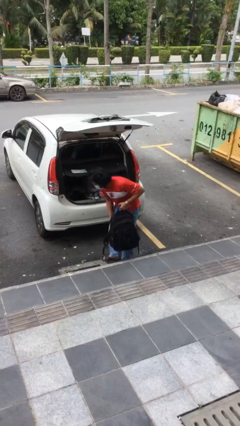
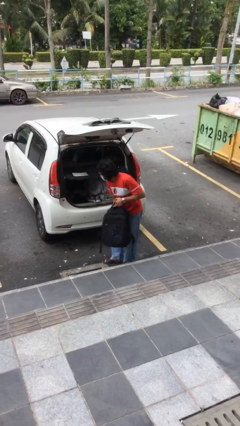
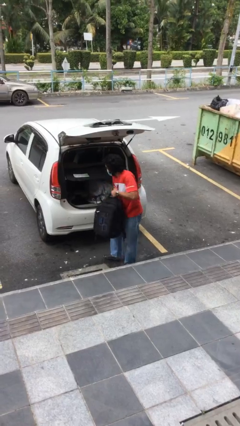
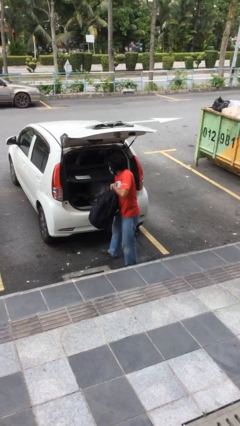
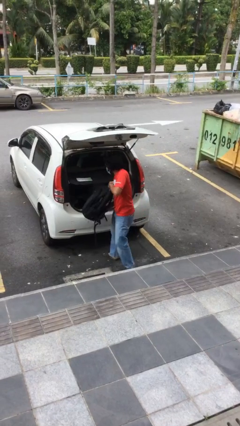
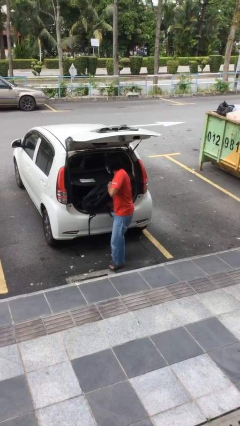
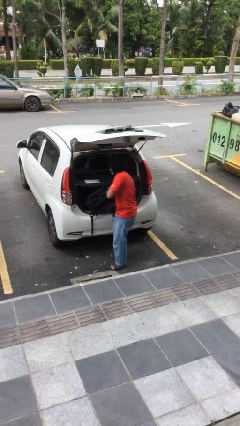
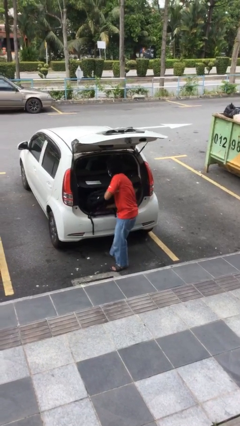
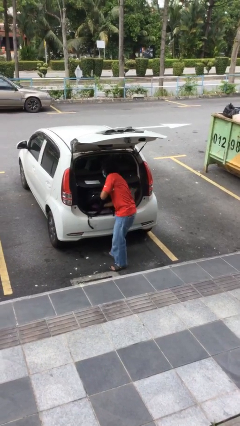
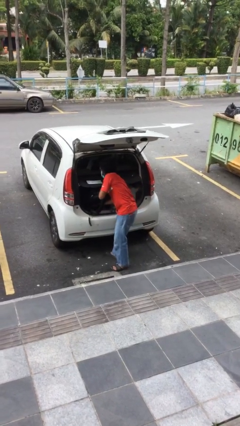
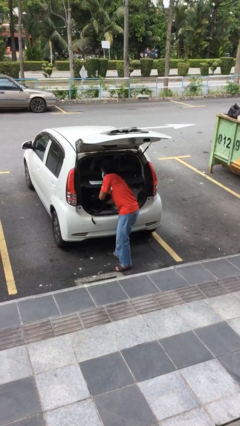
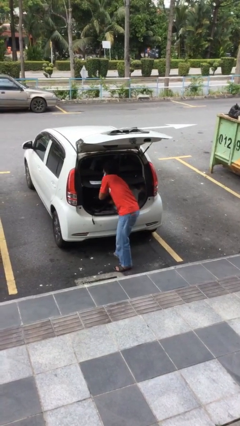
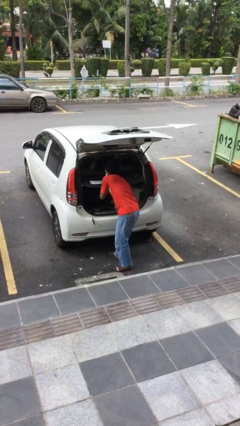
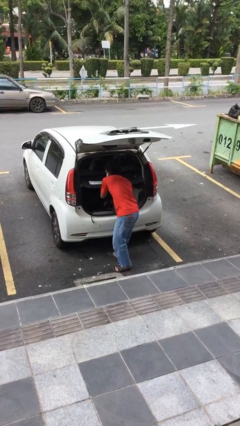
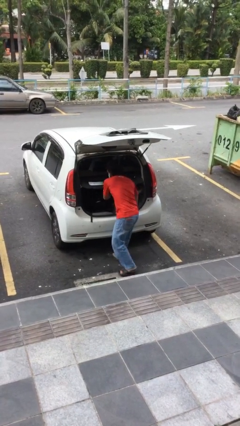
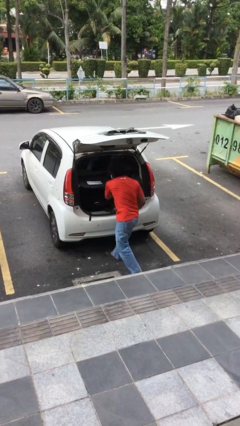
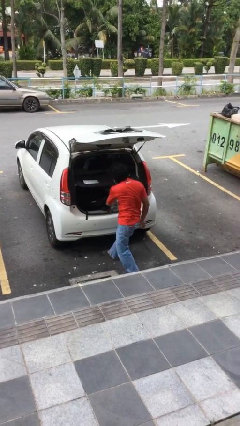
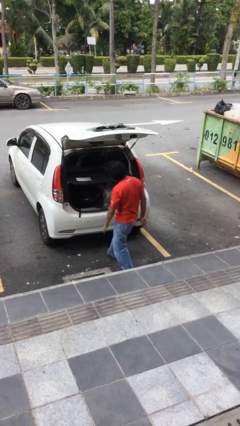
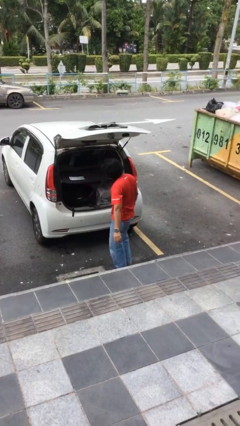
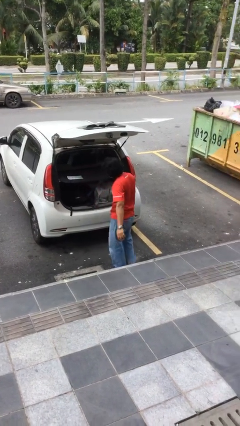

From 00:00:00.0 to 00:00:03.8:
person loads car

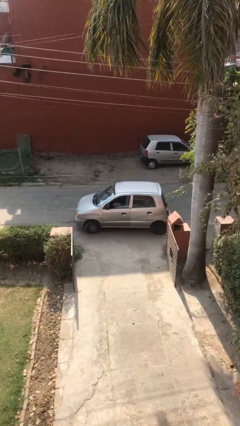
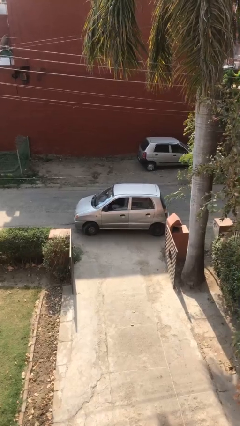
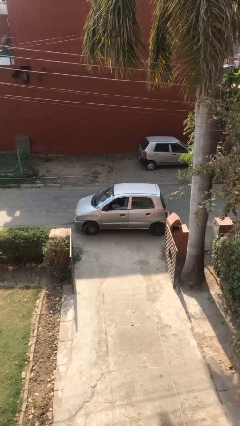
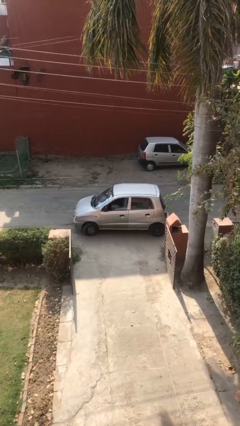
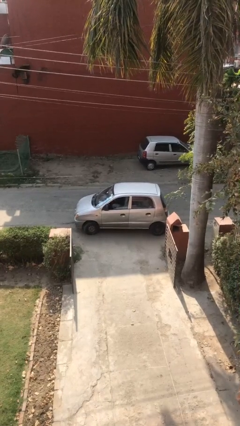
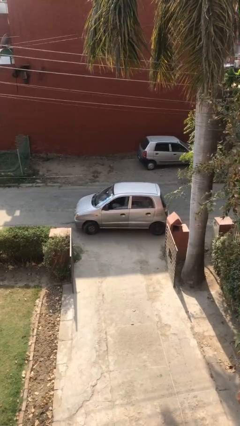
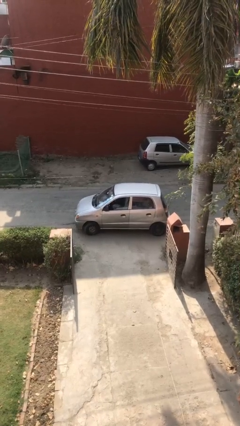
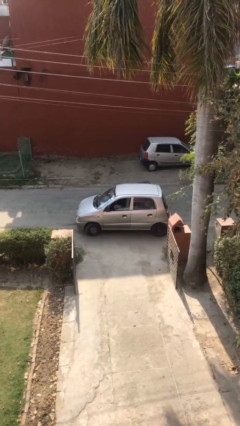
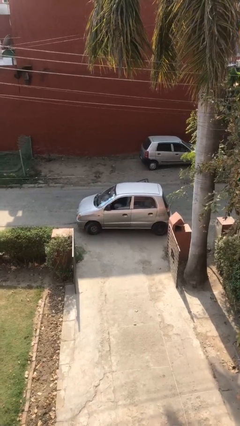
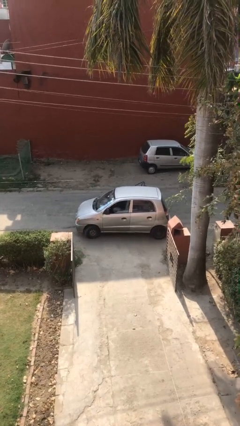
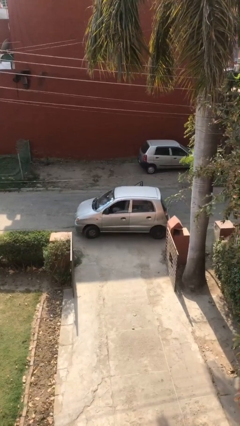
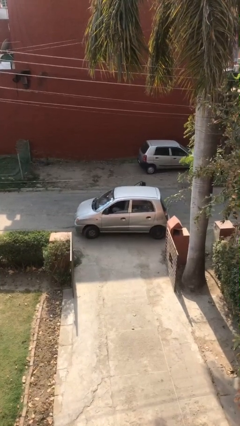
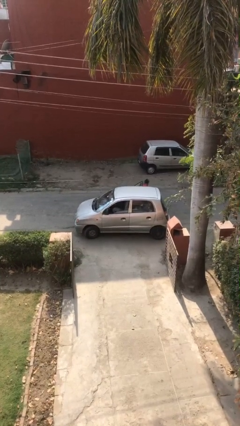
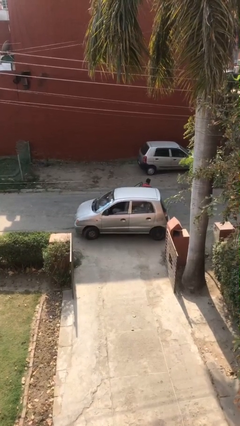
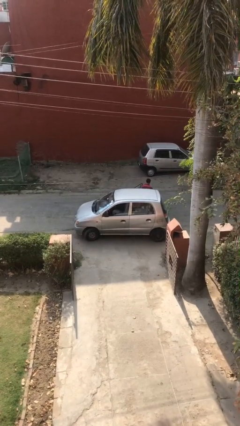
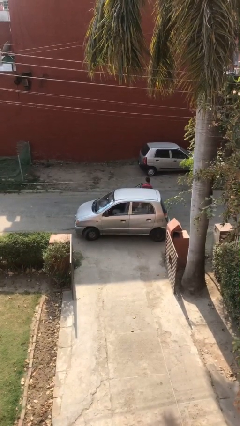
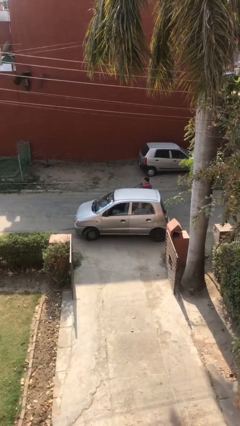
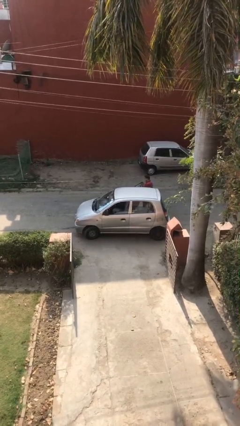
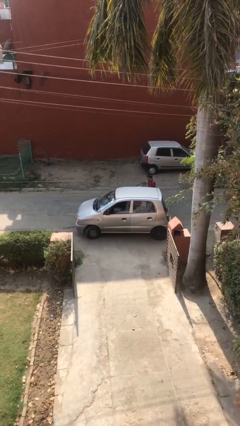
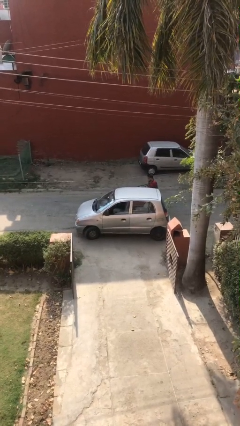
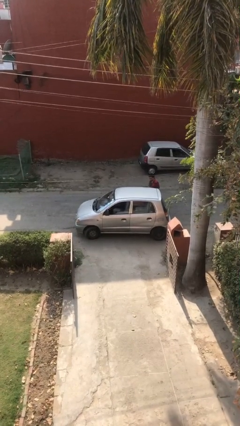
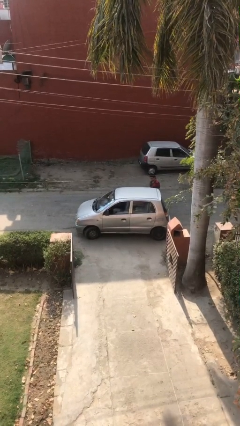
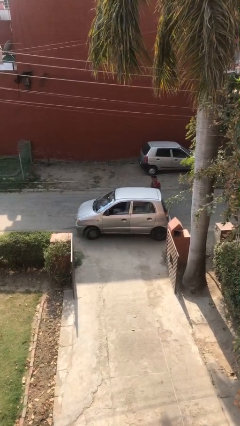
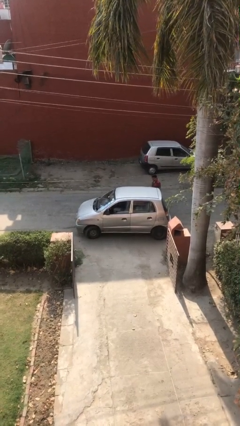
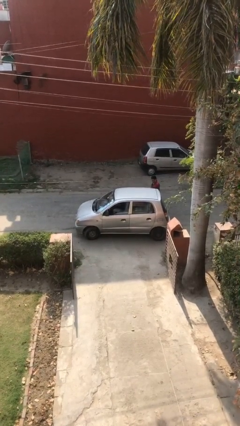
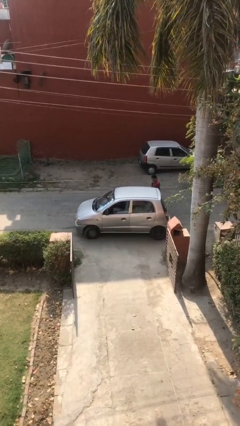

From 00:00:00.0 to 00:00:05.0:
car drops off person

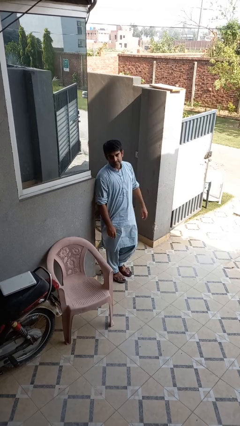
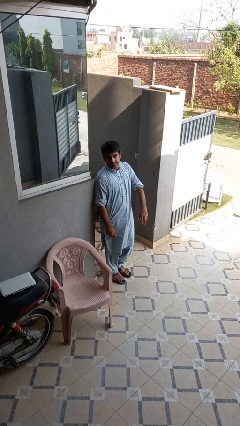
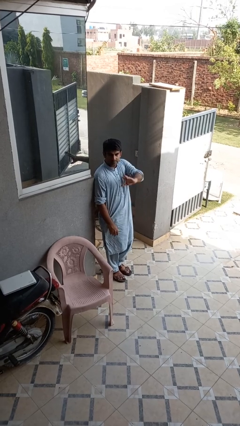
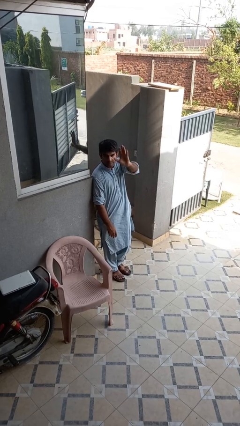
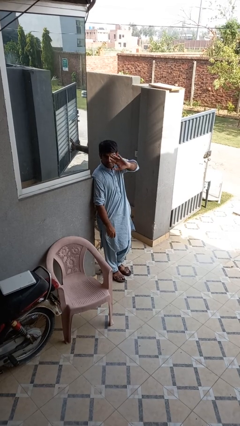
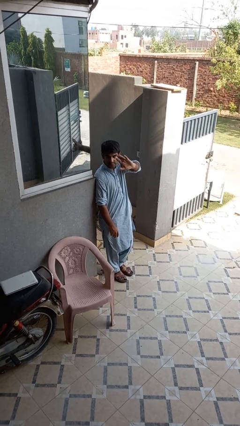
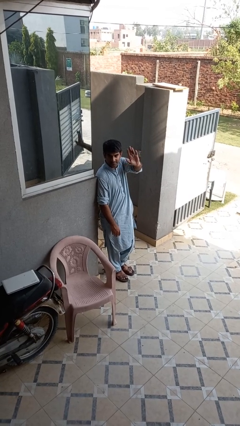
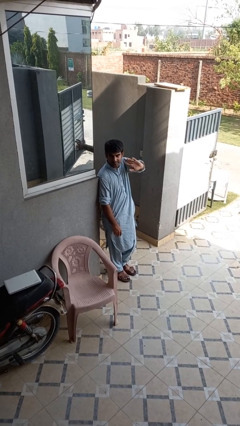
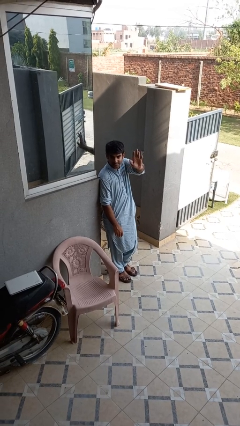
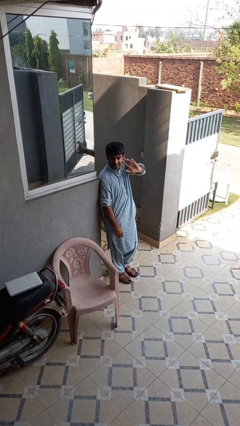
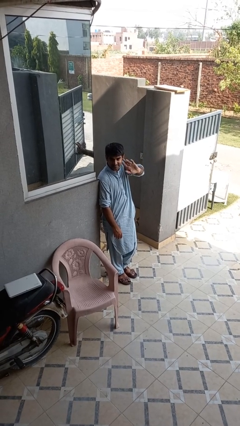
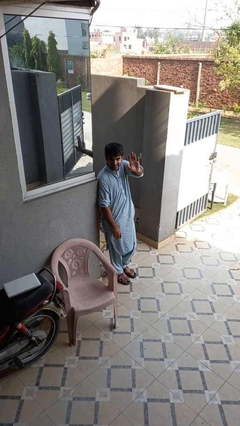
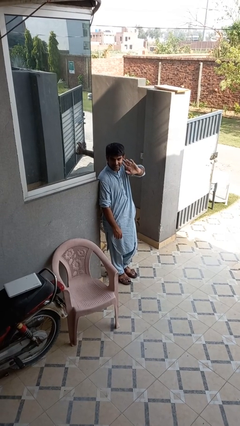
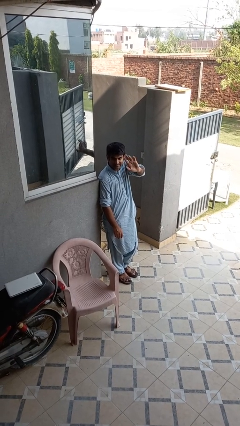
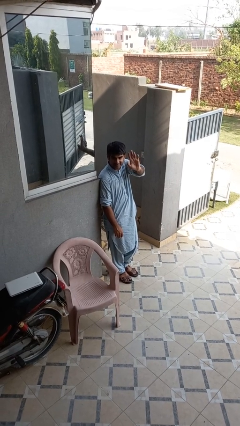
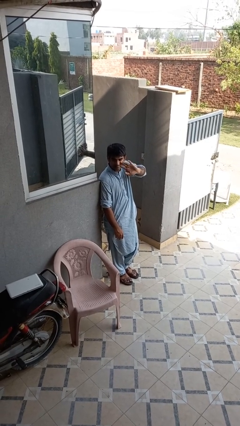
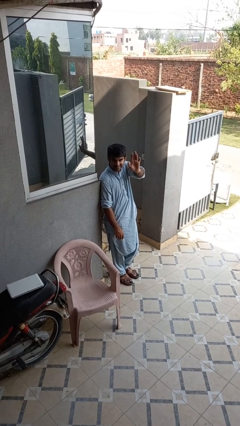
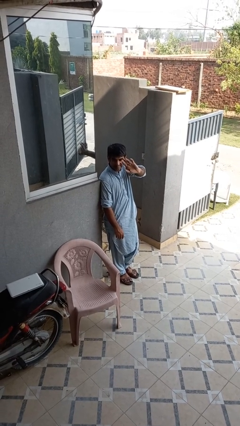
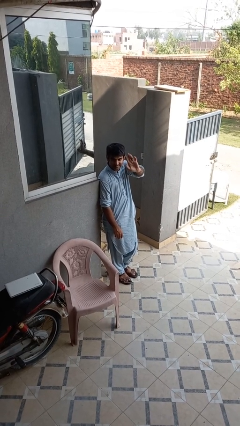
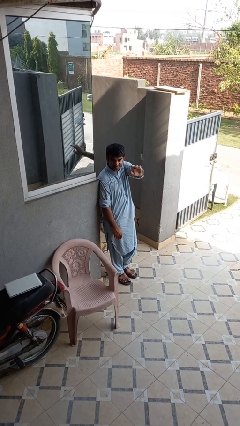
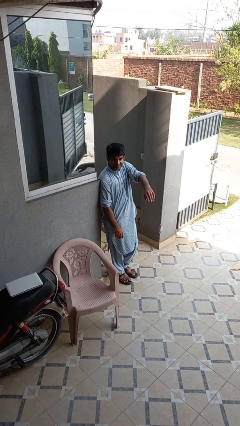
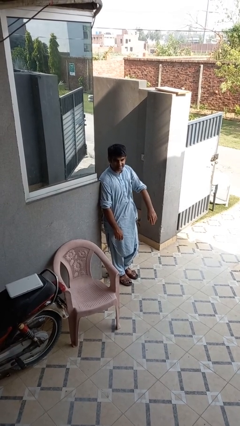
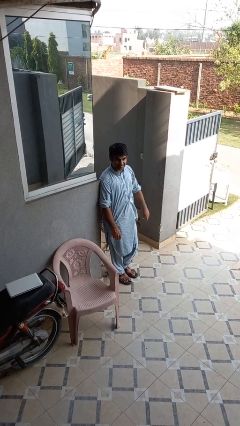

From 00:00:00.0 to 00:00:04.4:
person waves at person

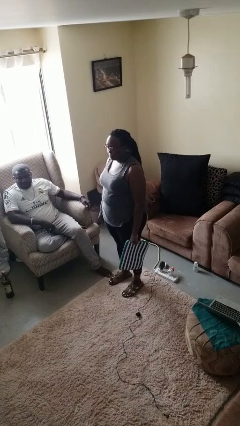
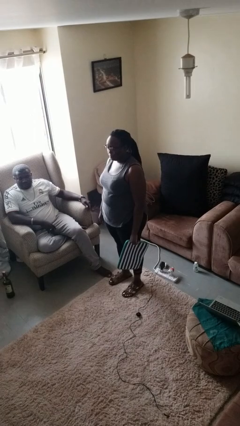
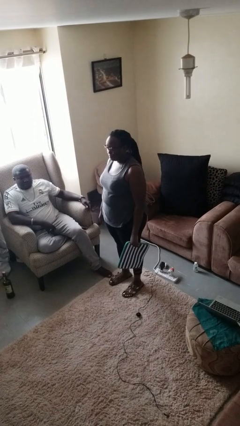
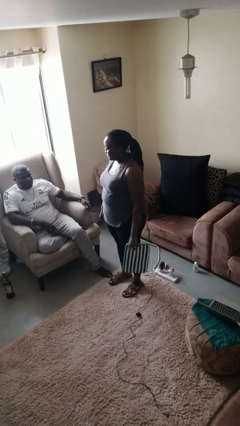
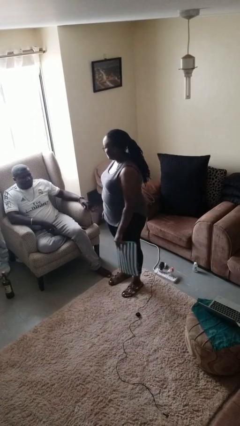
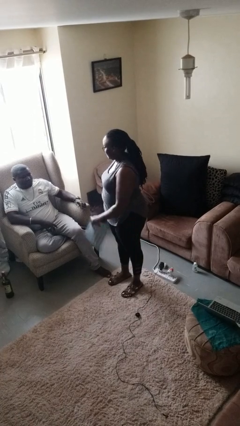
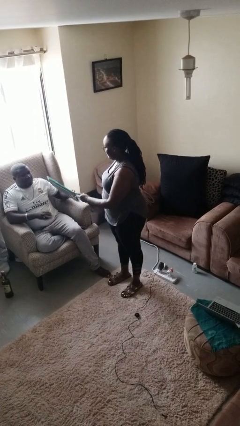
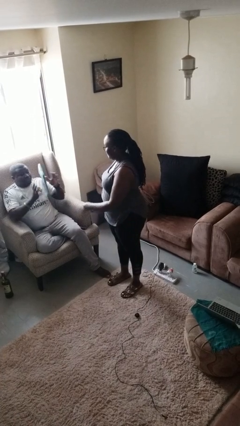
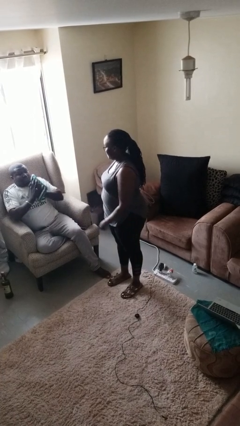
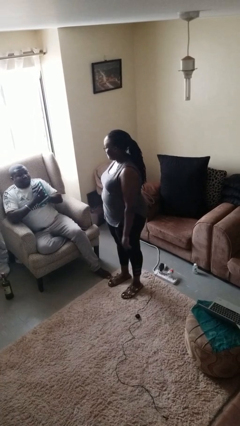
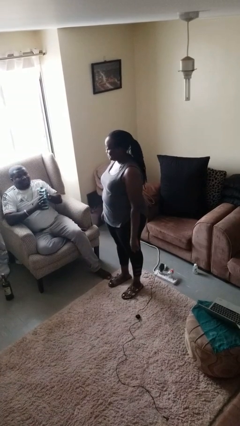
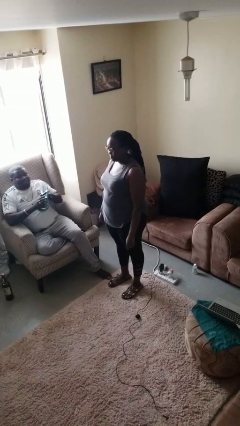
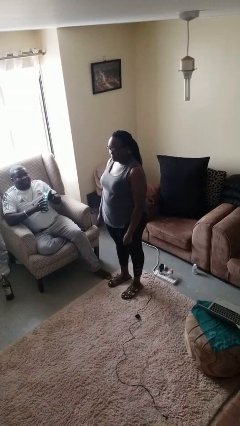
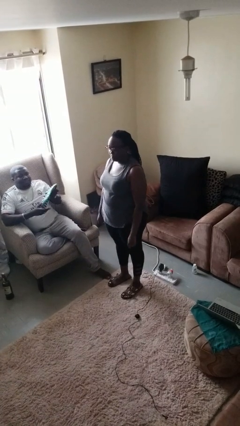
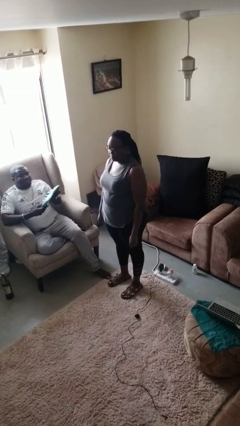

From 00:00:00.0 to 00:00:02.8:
person throws object to person

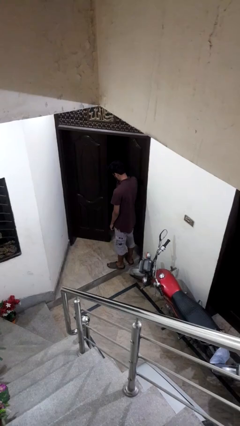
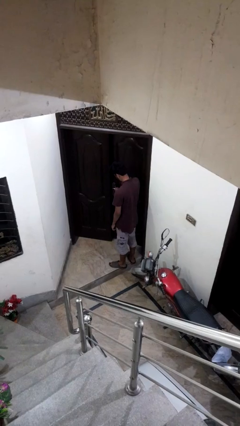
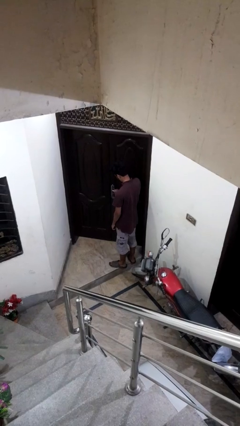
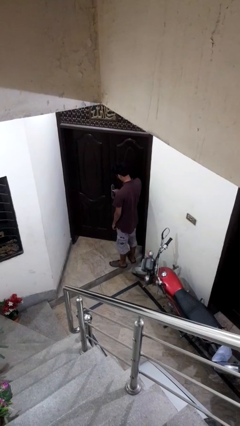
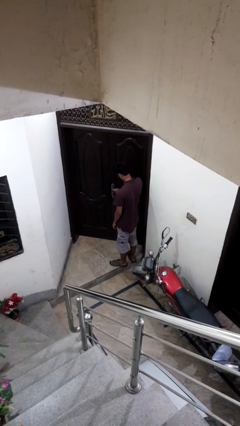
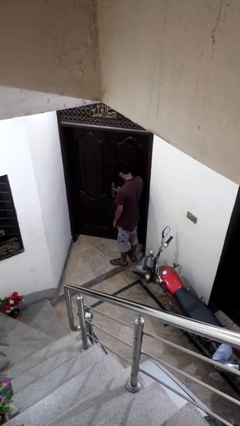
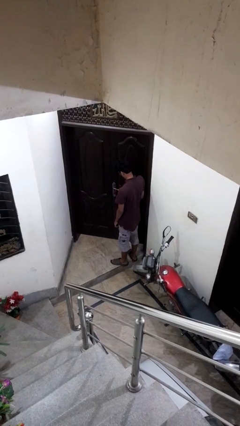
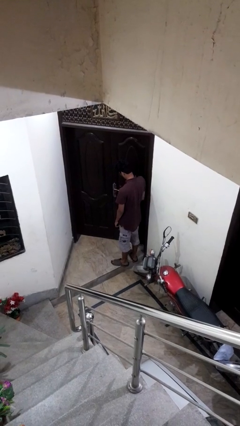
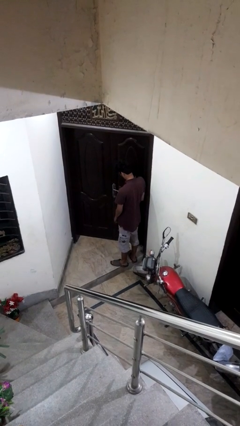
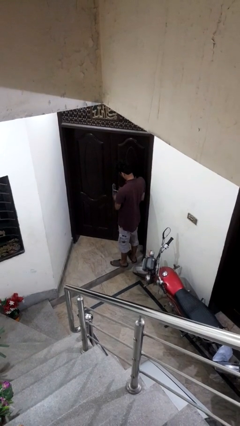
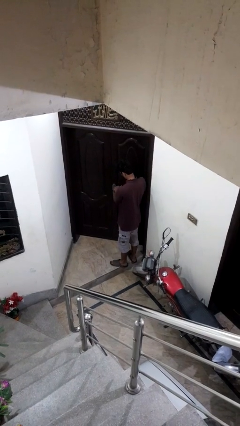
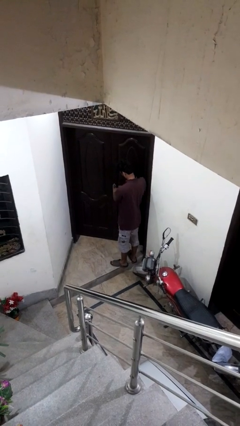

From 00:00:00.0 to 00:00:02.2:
person closes facility door
